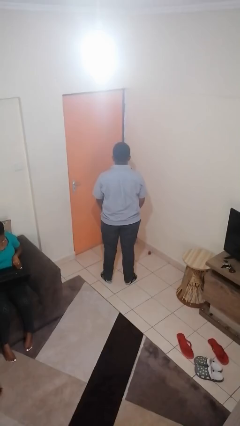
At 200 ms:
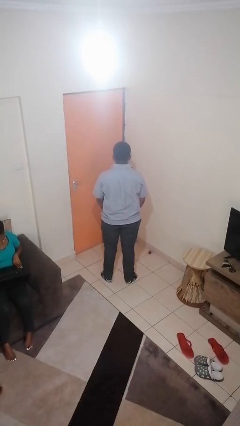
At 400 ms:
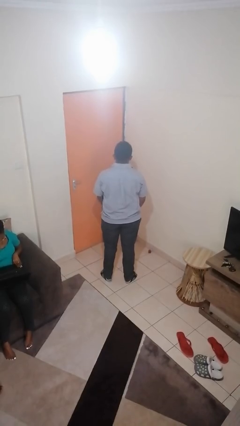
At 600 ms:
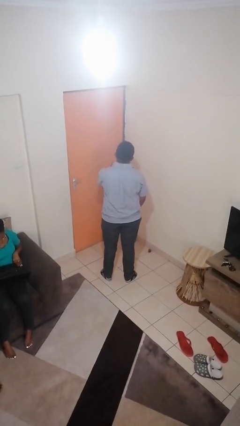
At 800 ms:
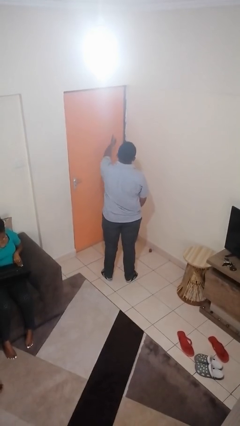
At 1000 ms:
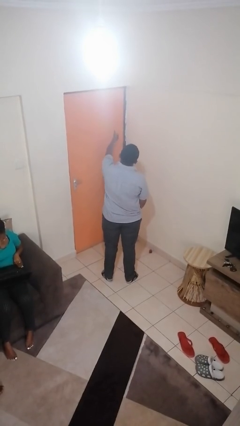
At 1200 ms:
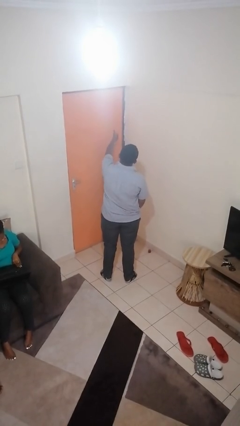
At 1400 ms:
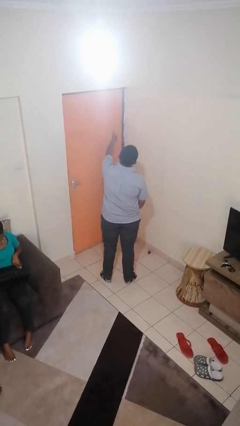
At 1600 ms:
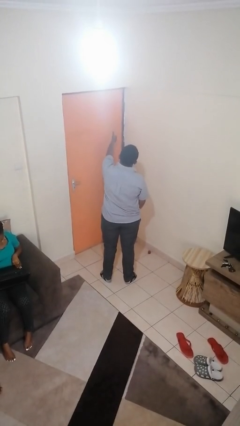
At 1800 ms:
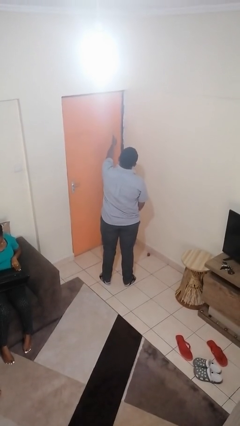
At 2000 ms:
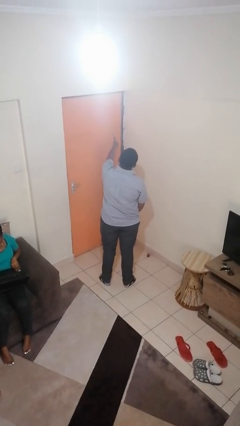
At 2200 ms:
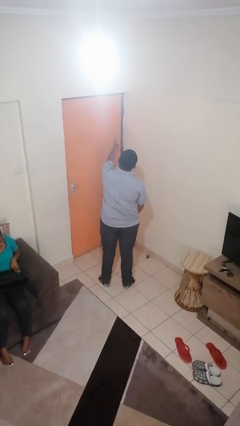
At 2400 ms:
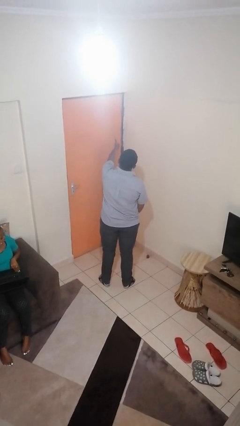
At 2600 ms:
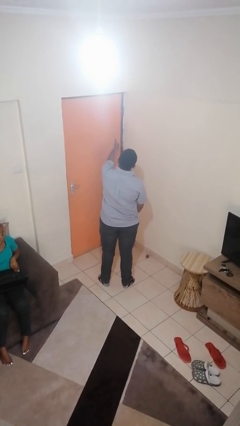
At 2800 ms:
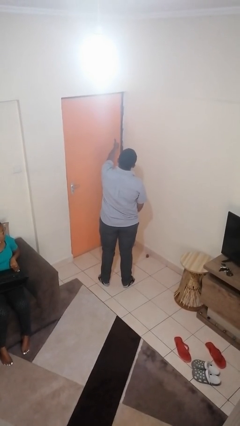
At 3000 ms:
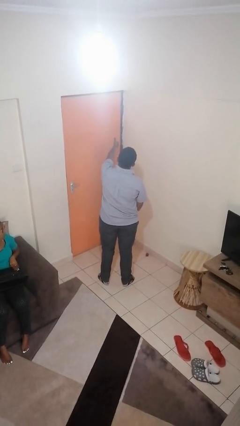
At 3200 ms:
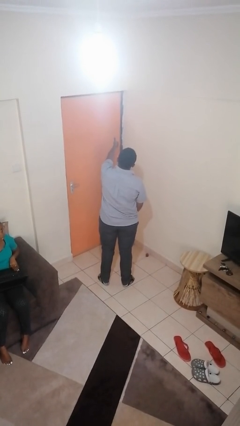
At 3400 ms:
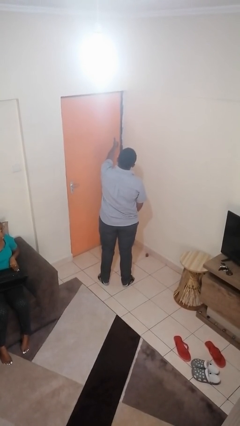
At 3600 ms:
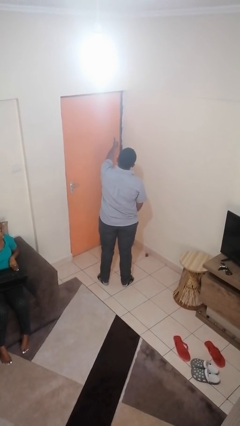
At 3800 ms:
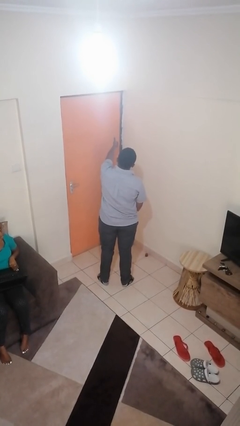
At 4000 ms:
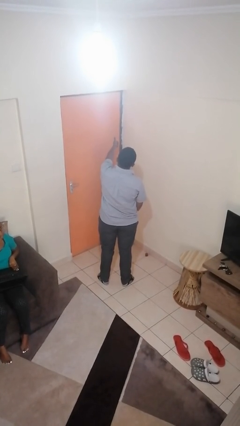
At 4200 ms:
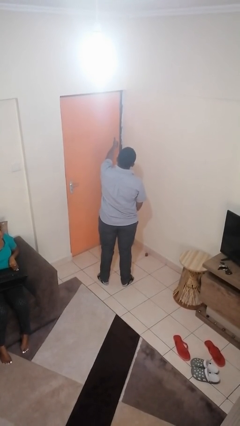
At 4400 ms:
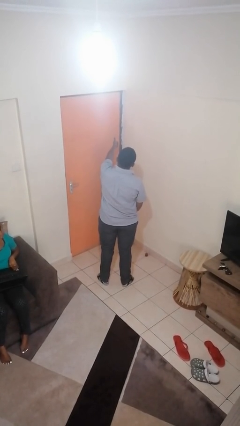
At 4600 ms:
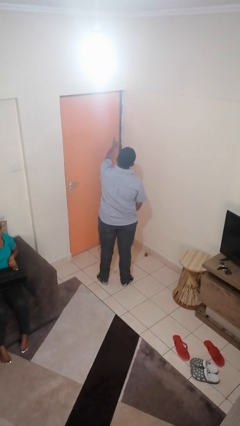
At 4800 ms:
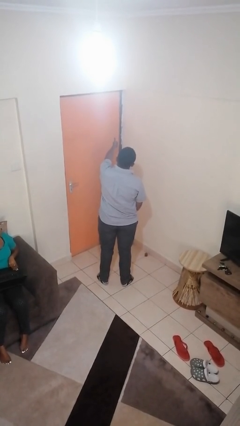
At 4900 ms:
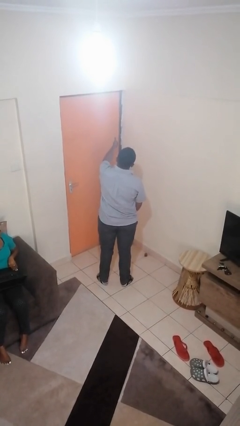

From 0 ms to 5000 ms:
person gestures thumbs up

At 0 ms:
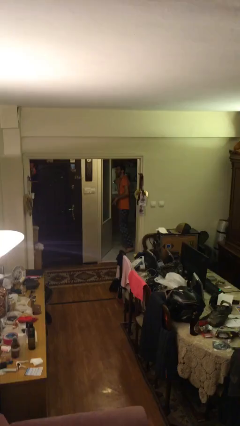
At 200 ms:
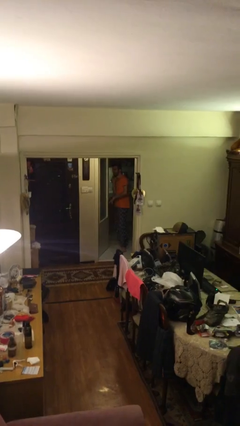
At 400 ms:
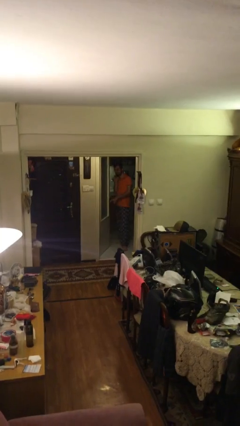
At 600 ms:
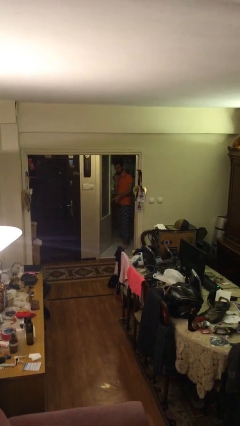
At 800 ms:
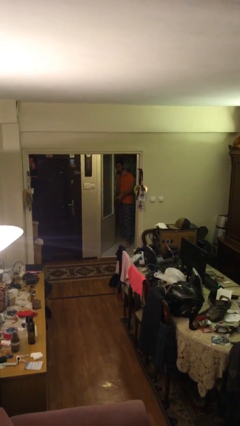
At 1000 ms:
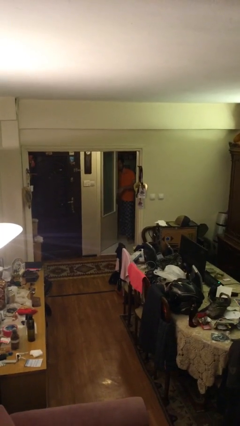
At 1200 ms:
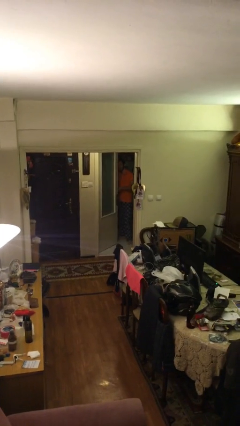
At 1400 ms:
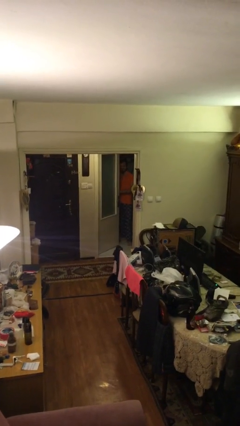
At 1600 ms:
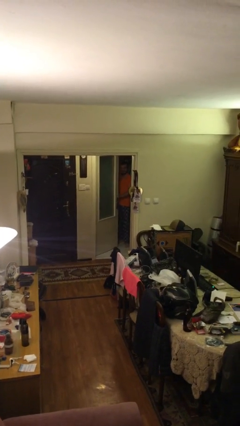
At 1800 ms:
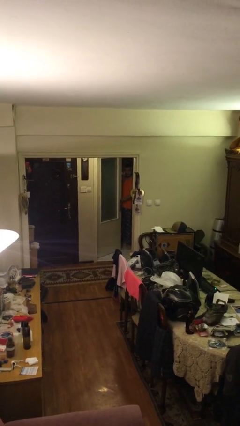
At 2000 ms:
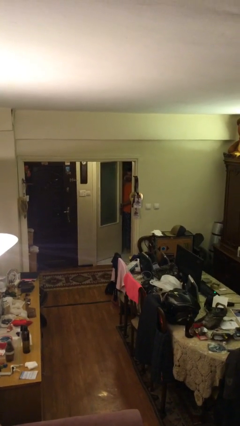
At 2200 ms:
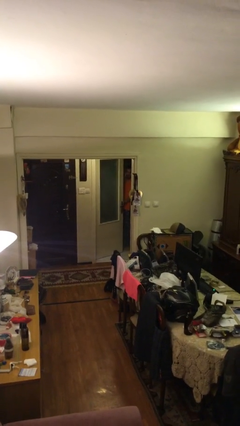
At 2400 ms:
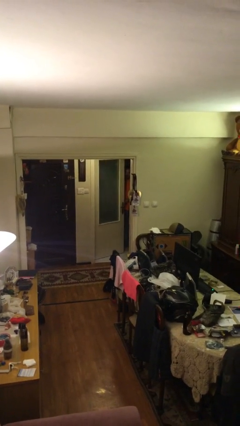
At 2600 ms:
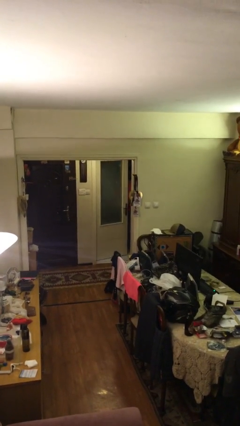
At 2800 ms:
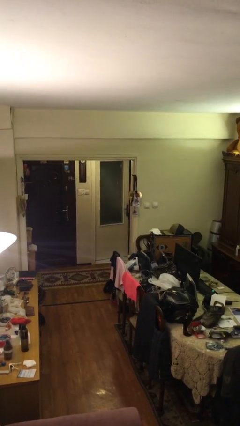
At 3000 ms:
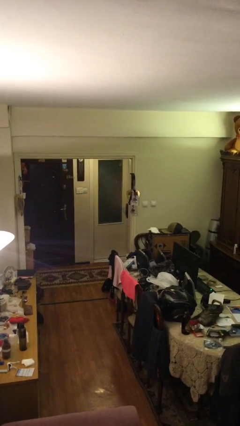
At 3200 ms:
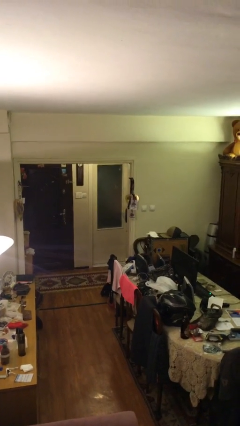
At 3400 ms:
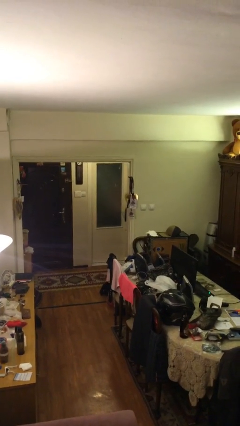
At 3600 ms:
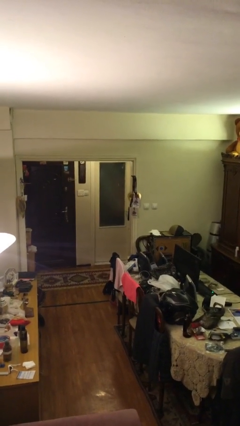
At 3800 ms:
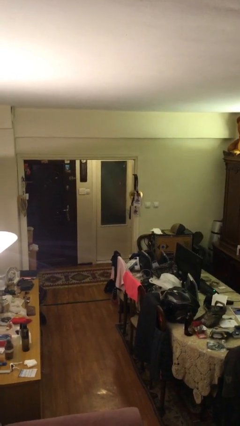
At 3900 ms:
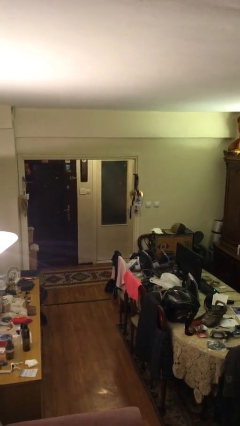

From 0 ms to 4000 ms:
person closes facility door

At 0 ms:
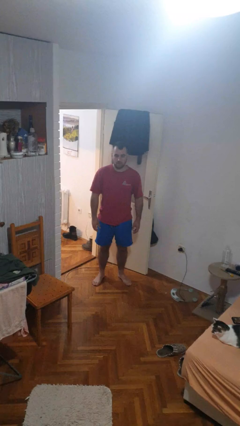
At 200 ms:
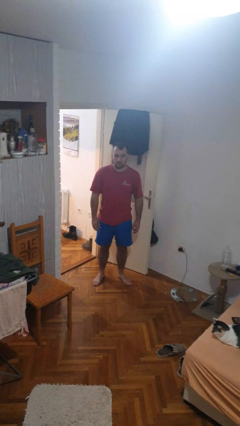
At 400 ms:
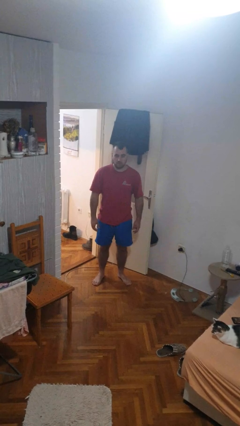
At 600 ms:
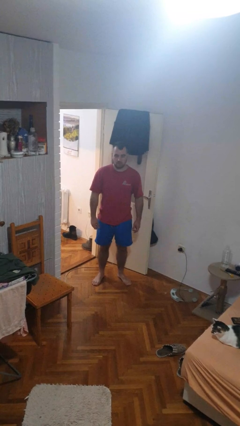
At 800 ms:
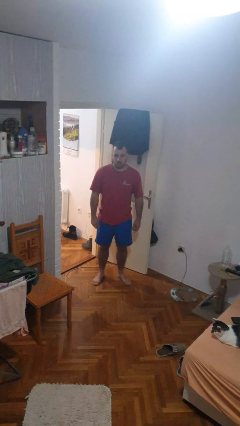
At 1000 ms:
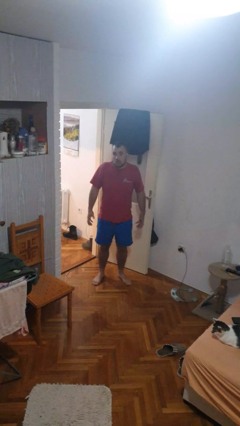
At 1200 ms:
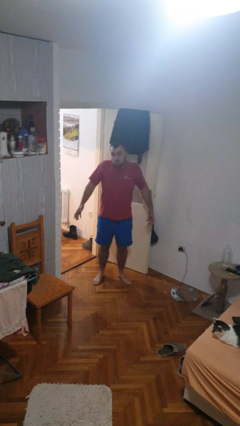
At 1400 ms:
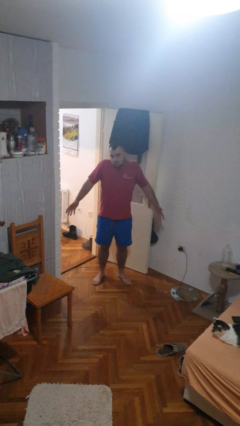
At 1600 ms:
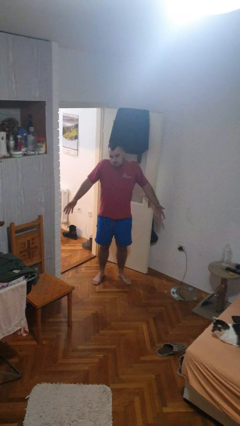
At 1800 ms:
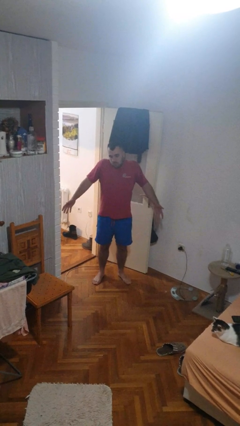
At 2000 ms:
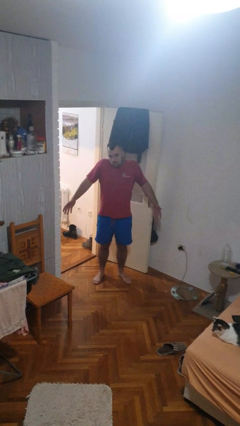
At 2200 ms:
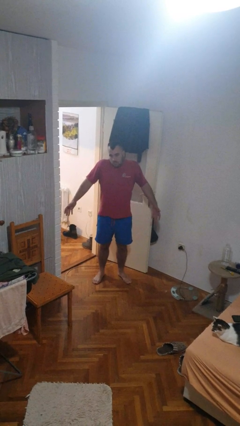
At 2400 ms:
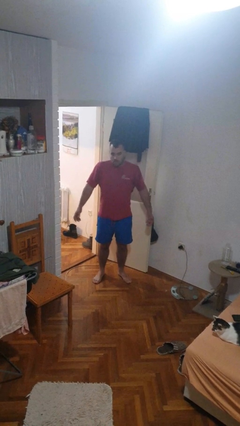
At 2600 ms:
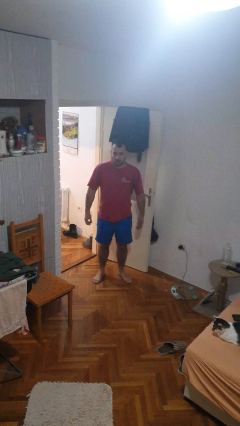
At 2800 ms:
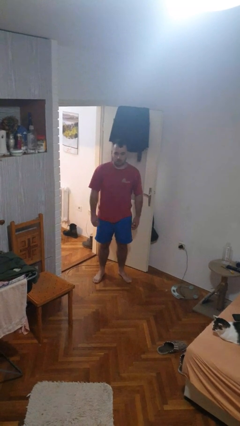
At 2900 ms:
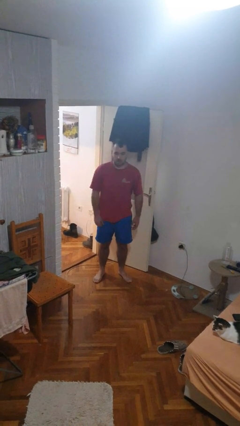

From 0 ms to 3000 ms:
person shrugs

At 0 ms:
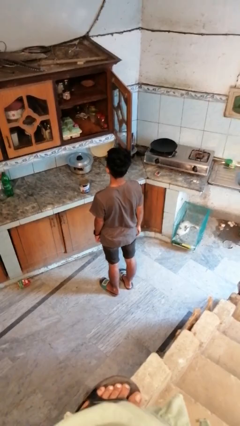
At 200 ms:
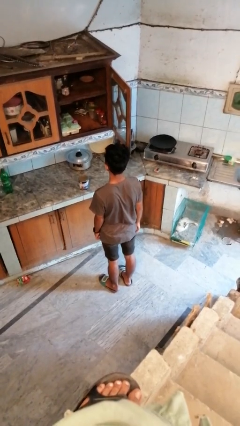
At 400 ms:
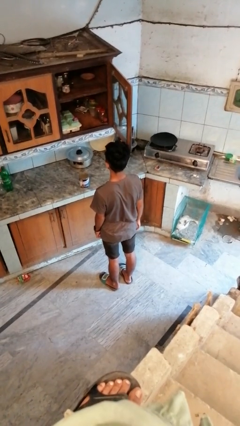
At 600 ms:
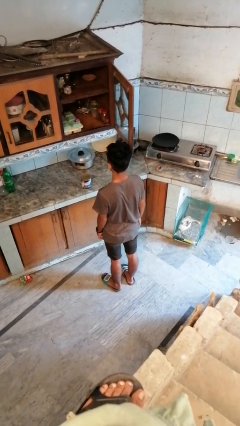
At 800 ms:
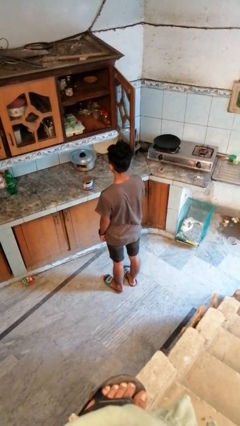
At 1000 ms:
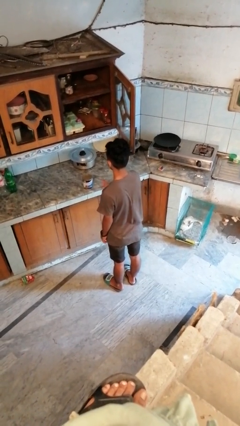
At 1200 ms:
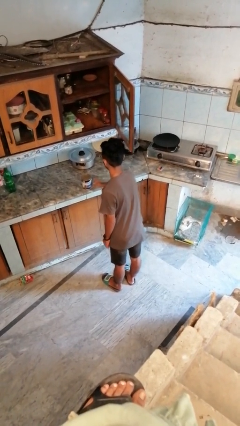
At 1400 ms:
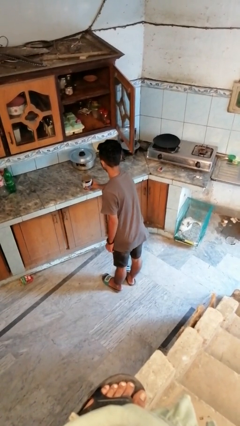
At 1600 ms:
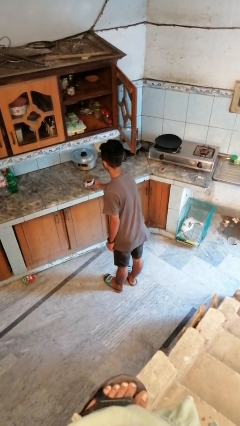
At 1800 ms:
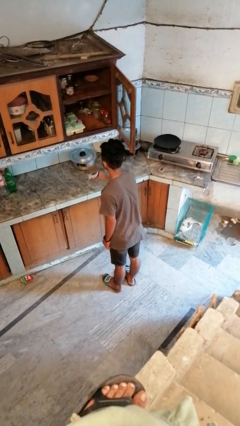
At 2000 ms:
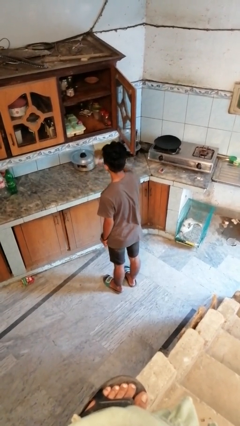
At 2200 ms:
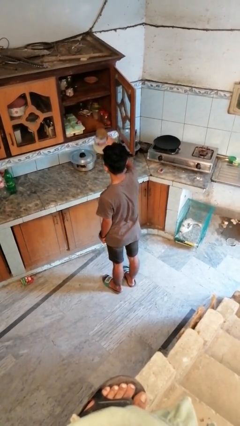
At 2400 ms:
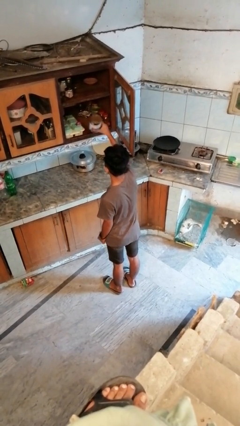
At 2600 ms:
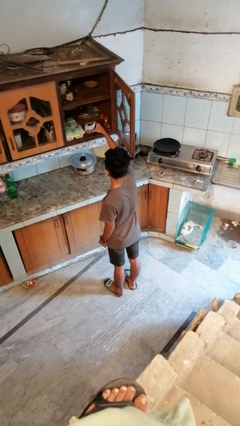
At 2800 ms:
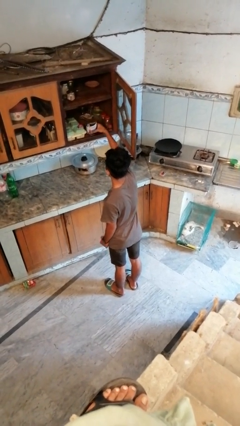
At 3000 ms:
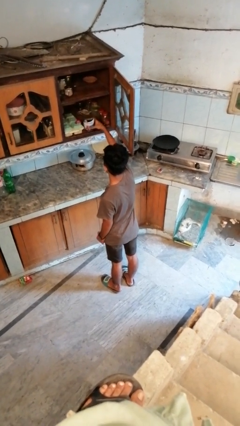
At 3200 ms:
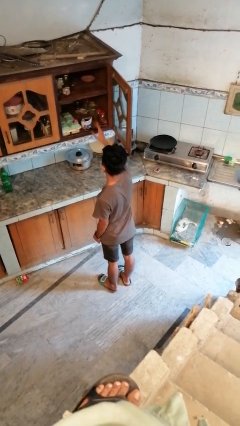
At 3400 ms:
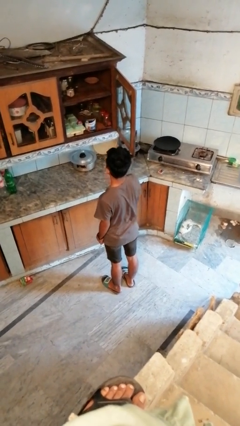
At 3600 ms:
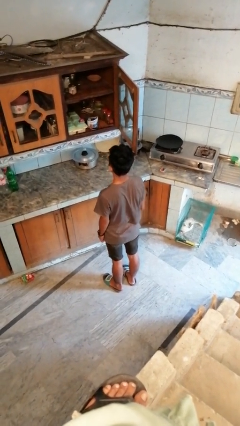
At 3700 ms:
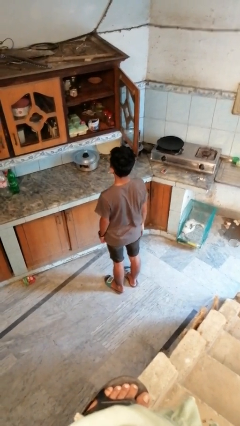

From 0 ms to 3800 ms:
person puts object in cabinet

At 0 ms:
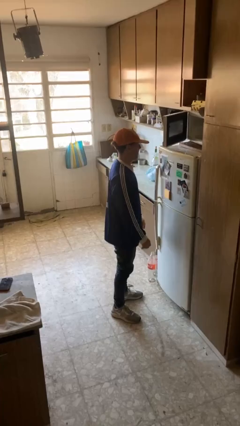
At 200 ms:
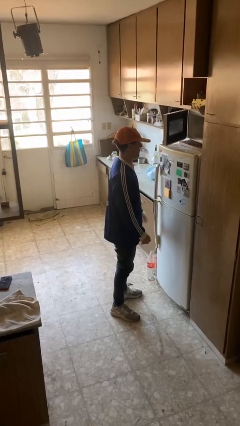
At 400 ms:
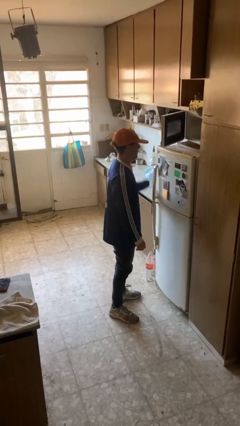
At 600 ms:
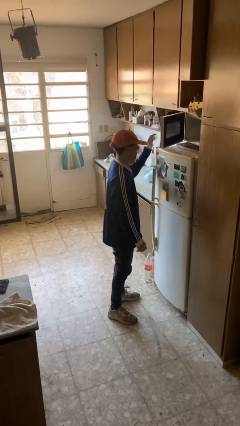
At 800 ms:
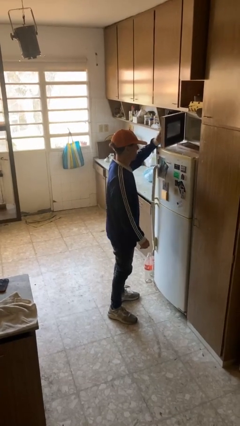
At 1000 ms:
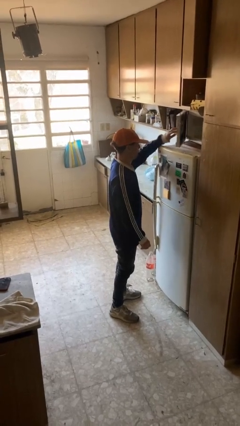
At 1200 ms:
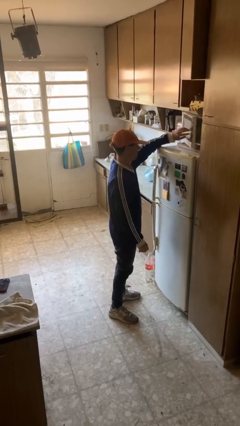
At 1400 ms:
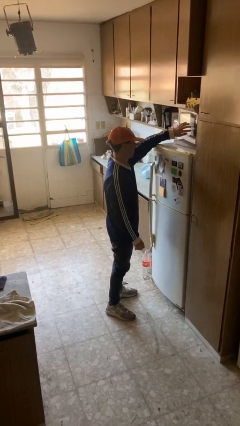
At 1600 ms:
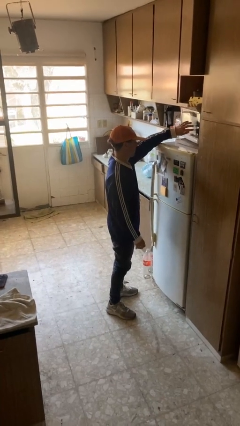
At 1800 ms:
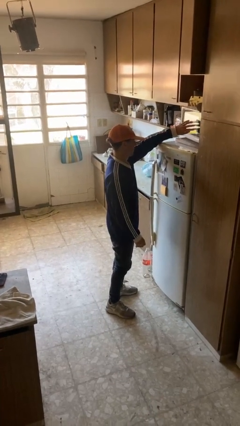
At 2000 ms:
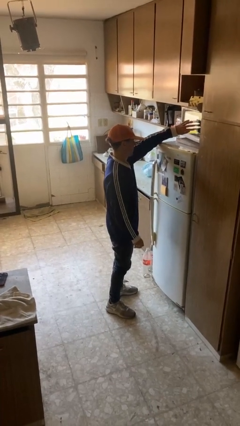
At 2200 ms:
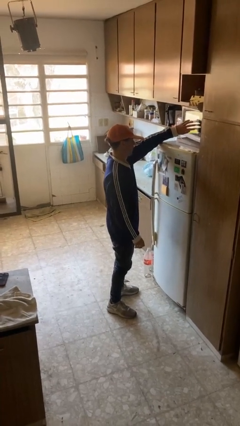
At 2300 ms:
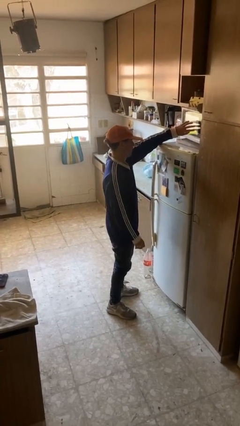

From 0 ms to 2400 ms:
person closes microwave
